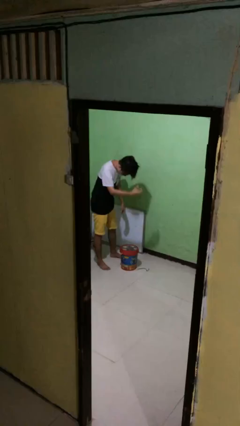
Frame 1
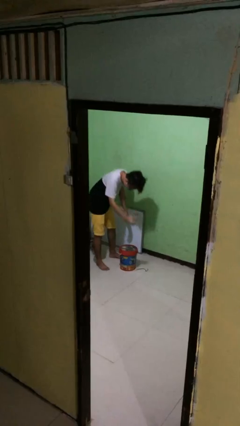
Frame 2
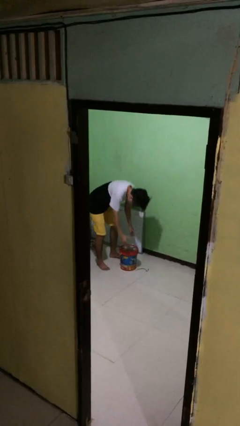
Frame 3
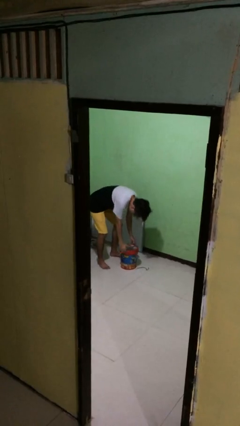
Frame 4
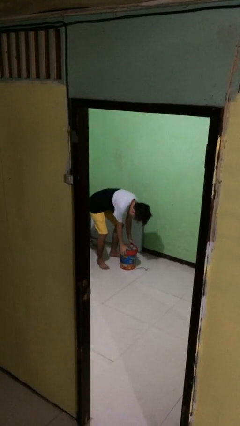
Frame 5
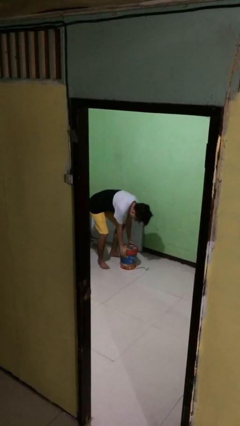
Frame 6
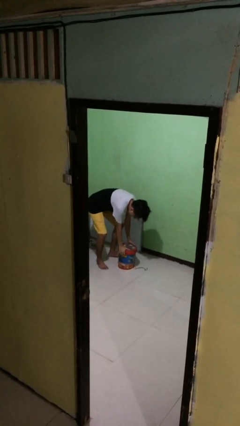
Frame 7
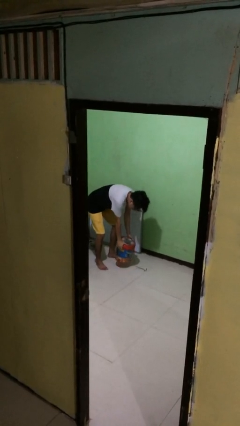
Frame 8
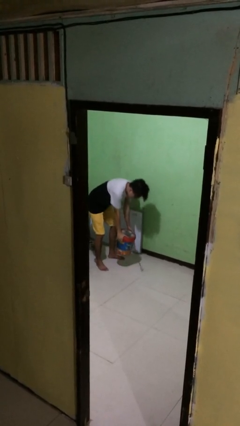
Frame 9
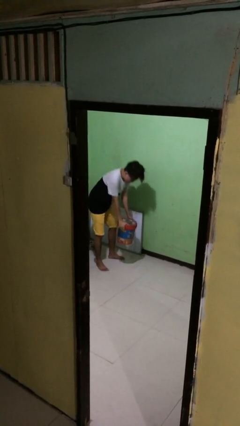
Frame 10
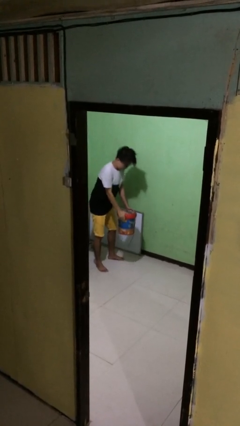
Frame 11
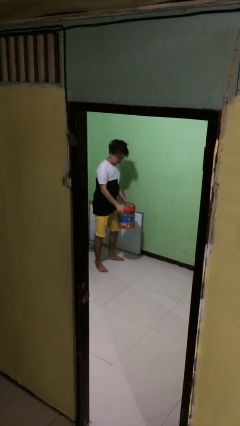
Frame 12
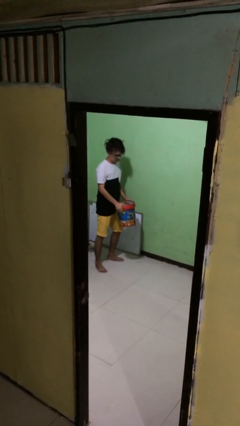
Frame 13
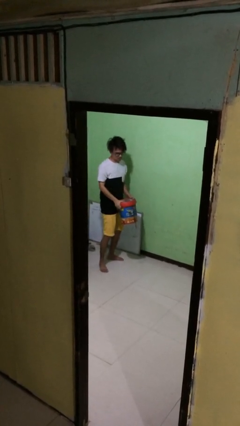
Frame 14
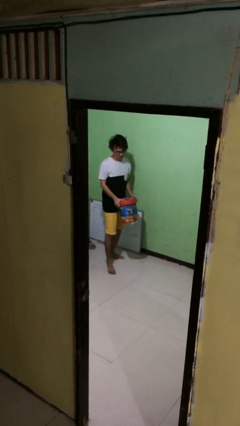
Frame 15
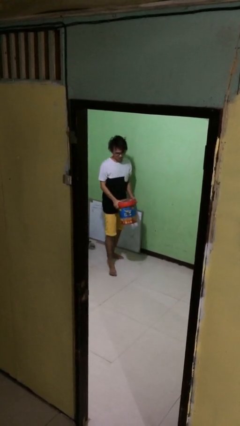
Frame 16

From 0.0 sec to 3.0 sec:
person picks up object from floor

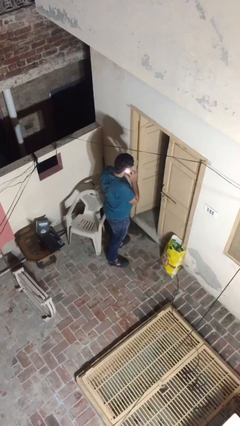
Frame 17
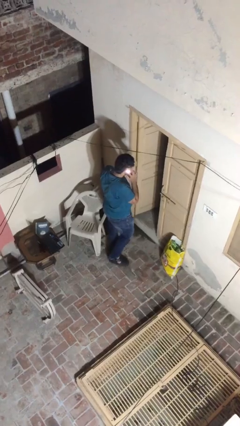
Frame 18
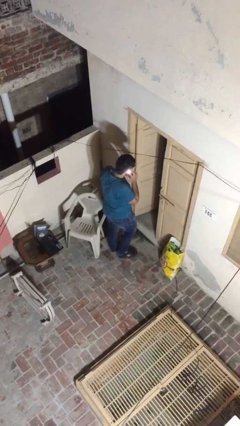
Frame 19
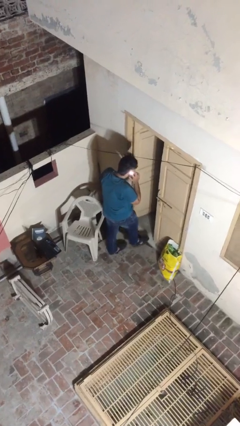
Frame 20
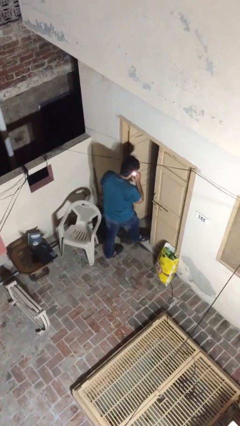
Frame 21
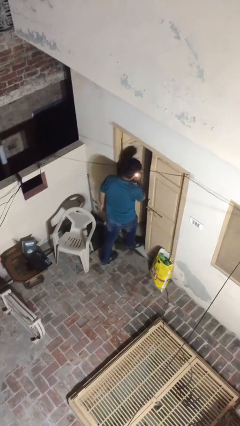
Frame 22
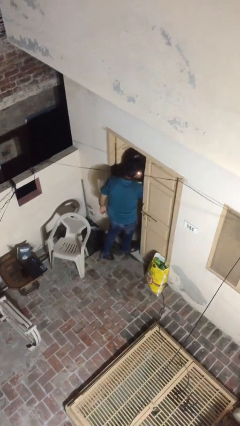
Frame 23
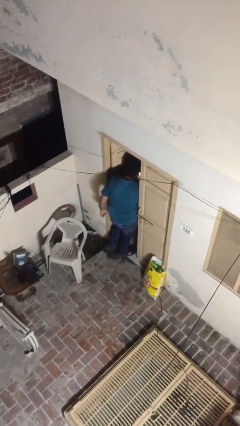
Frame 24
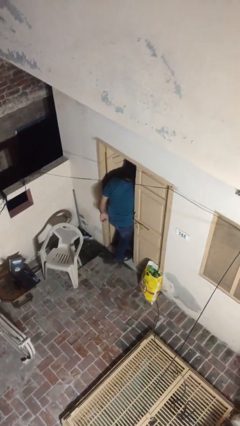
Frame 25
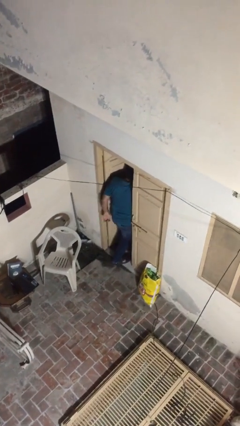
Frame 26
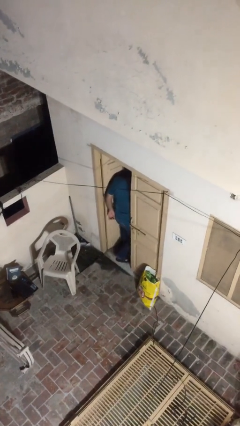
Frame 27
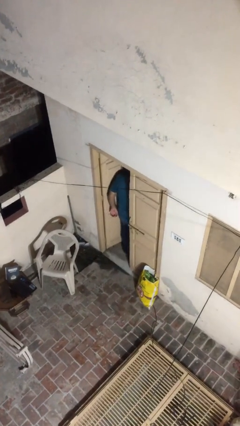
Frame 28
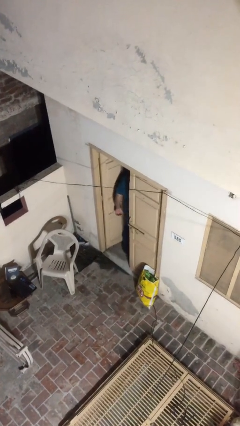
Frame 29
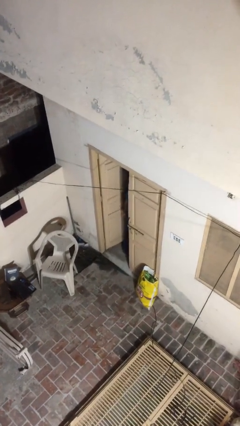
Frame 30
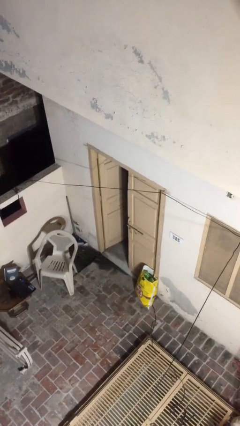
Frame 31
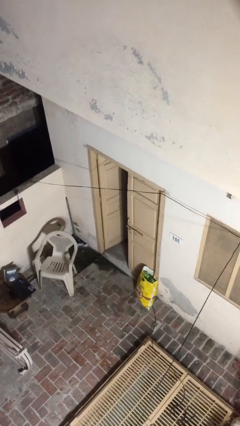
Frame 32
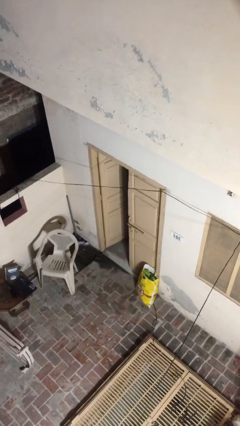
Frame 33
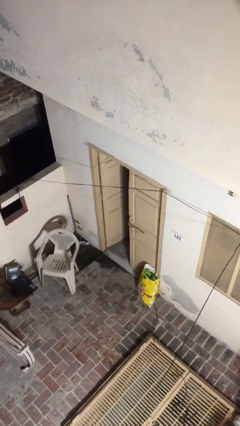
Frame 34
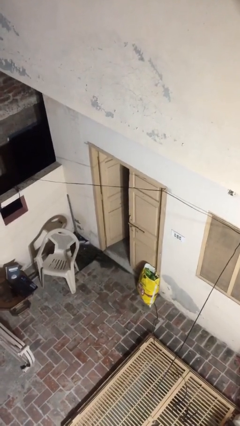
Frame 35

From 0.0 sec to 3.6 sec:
person exits scene through structure

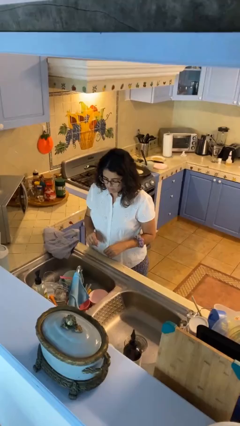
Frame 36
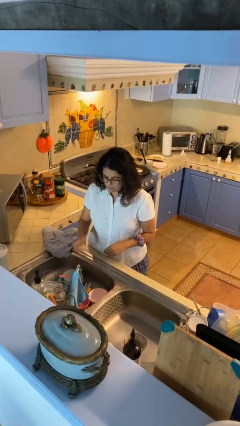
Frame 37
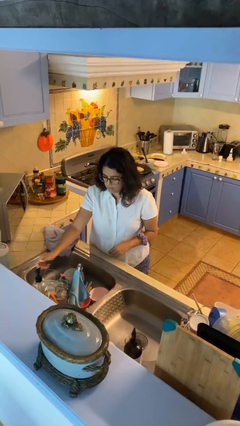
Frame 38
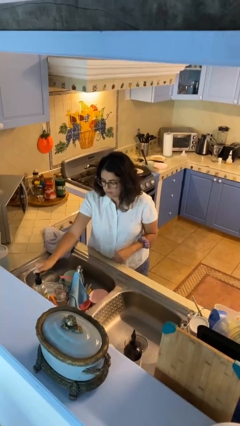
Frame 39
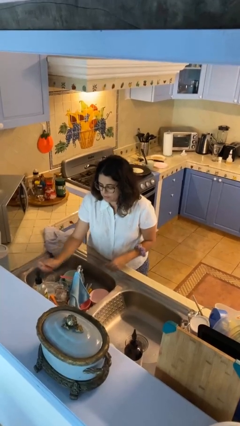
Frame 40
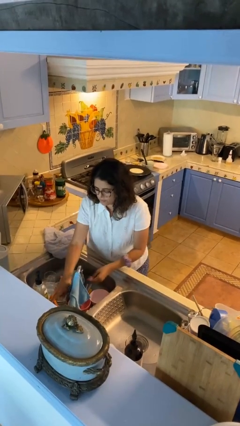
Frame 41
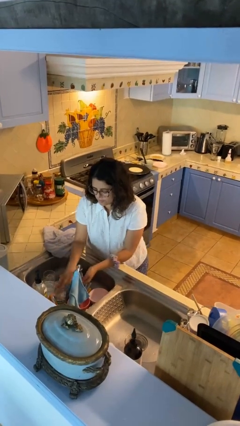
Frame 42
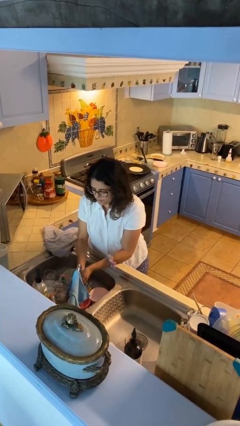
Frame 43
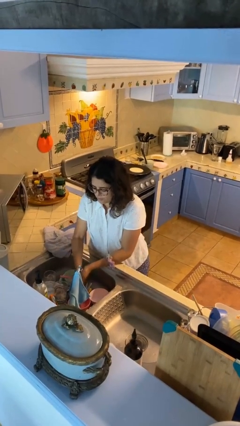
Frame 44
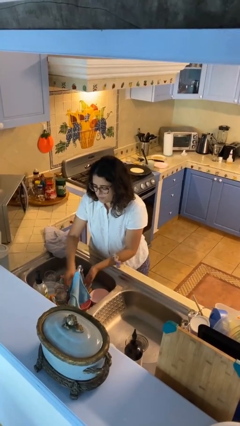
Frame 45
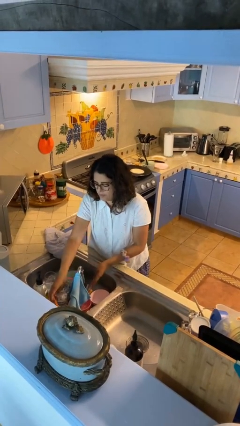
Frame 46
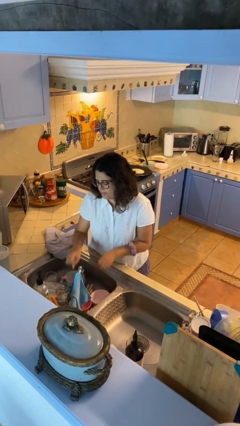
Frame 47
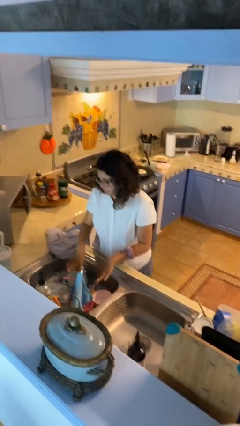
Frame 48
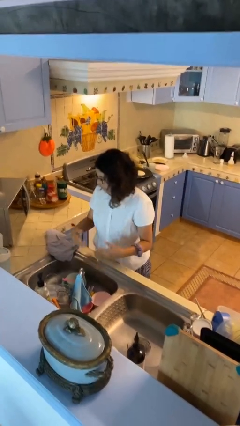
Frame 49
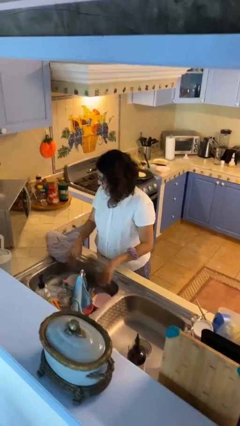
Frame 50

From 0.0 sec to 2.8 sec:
person washes hands

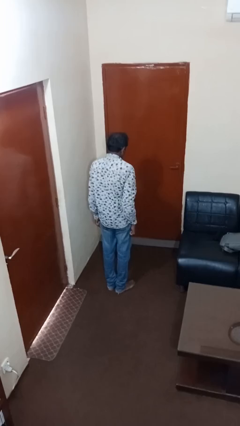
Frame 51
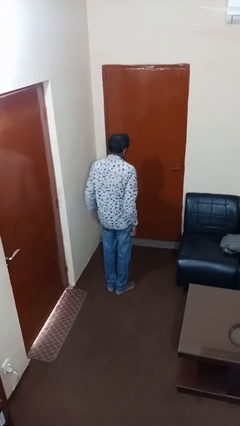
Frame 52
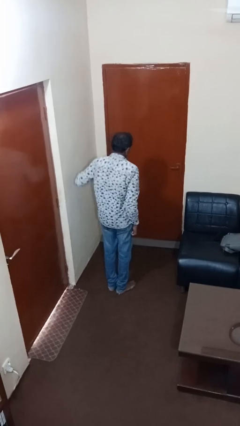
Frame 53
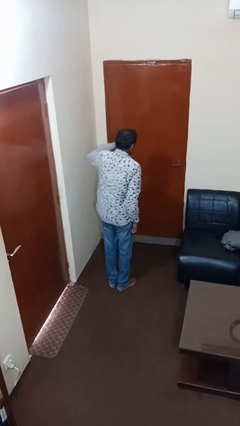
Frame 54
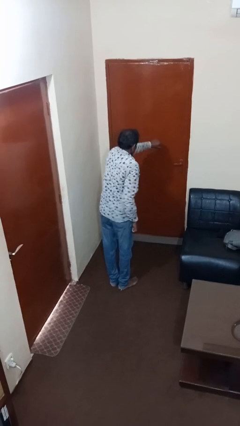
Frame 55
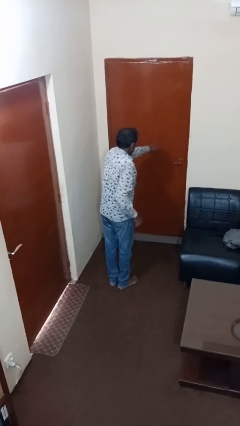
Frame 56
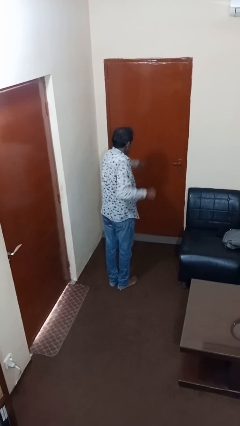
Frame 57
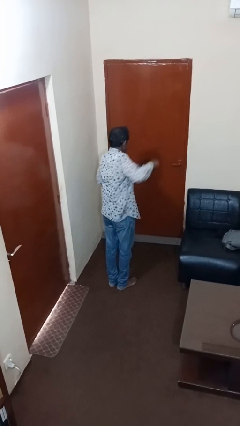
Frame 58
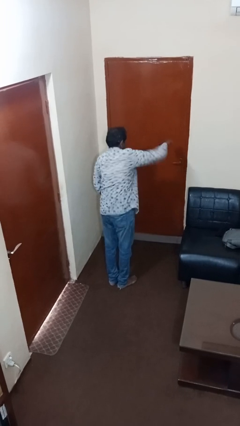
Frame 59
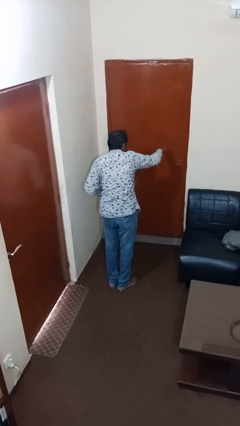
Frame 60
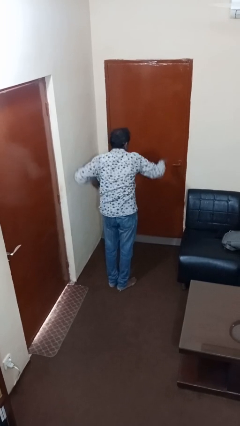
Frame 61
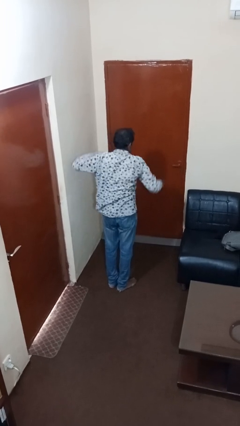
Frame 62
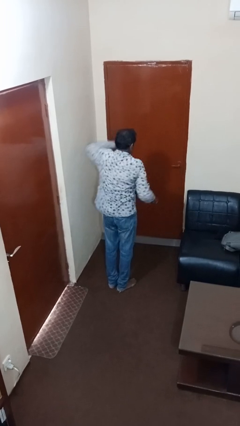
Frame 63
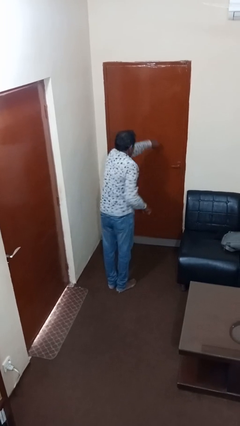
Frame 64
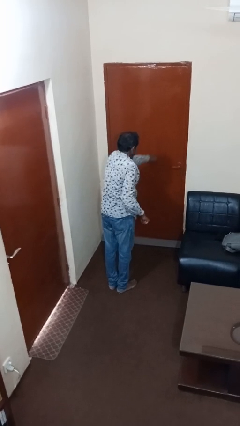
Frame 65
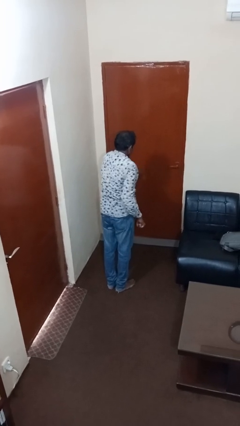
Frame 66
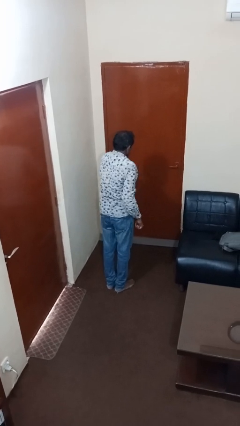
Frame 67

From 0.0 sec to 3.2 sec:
person punches

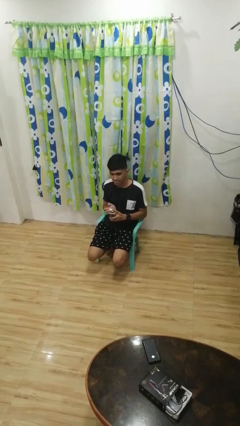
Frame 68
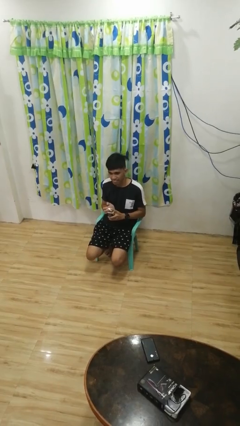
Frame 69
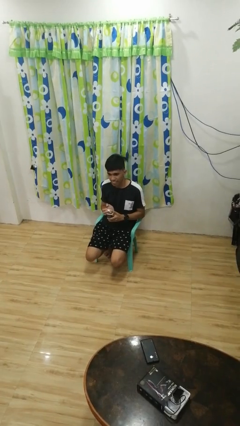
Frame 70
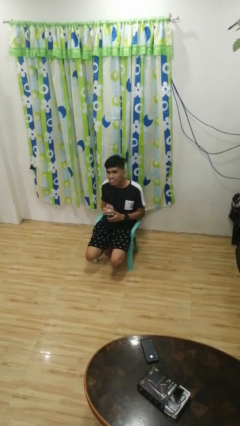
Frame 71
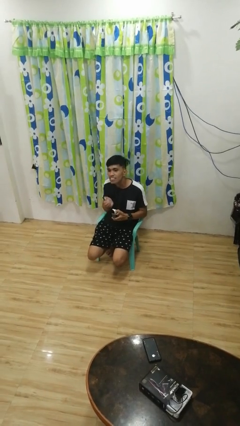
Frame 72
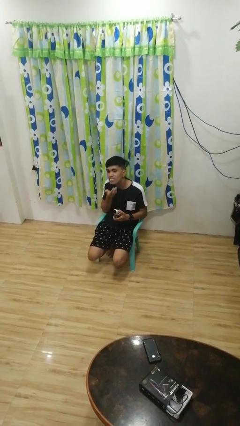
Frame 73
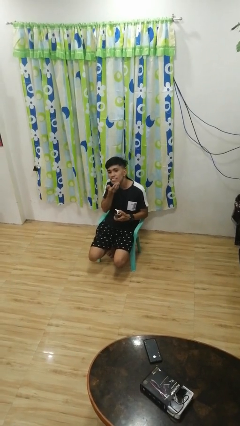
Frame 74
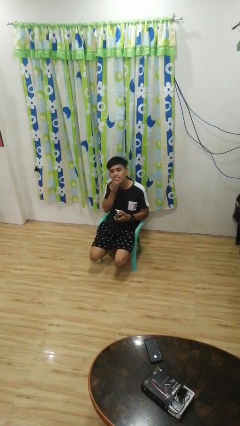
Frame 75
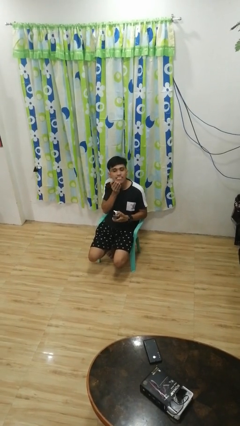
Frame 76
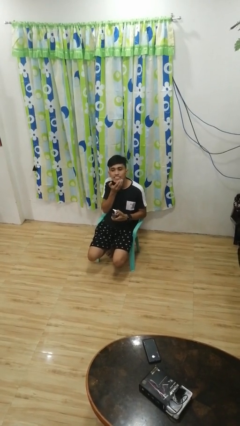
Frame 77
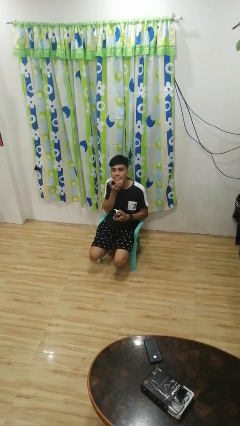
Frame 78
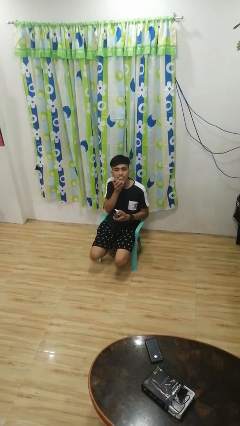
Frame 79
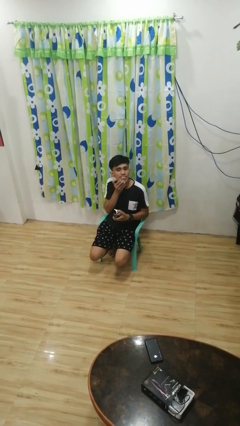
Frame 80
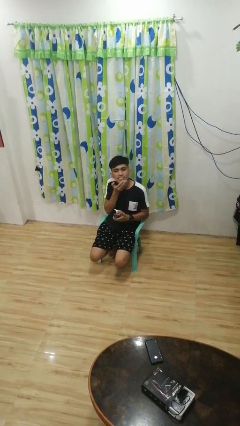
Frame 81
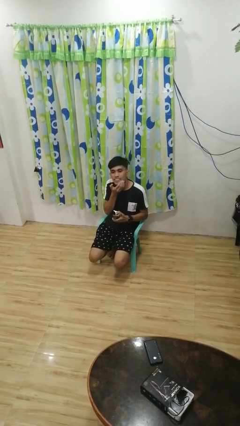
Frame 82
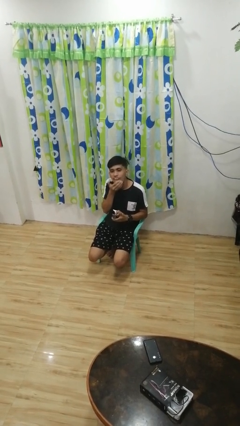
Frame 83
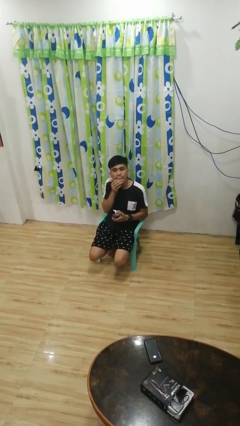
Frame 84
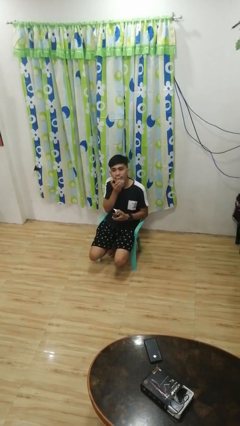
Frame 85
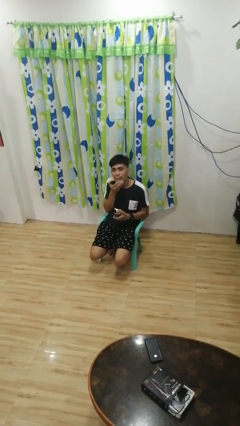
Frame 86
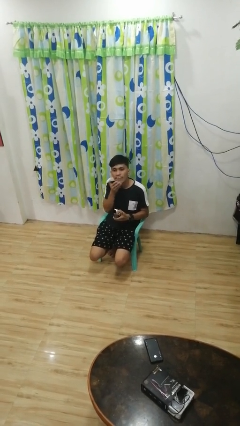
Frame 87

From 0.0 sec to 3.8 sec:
person applies shaving cream

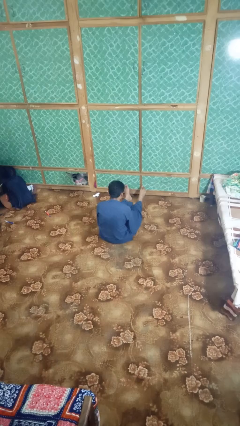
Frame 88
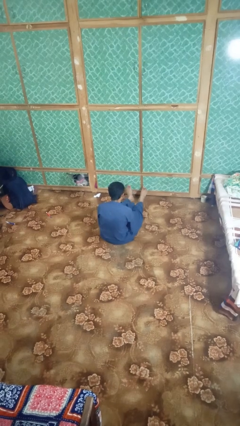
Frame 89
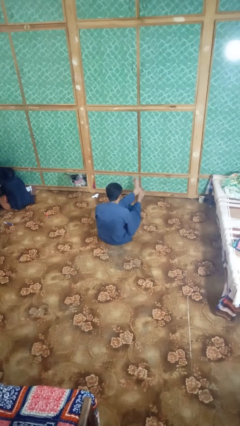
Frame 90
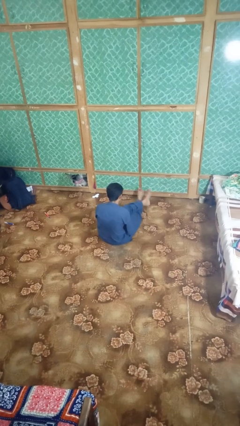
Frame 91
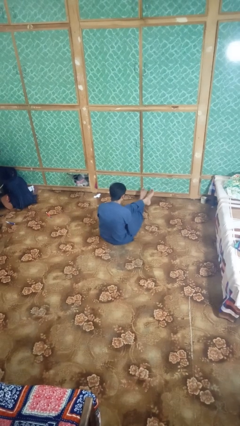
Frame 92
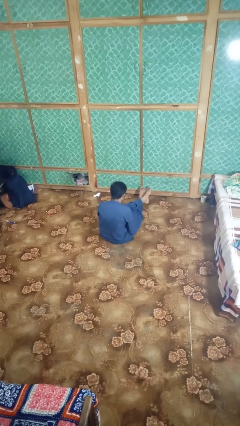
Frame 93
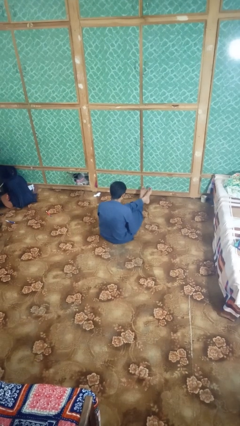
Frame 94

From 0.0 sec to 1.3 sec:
person crosses legs
